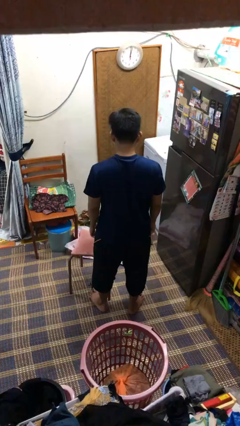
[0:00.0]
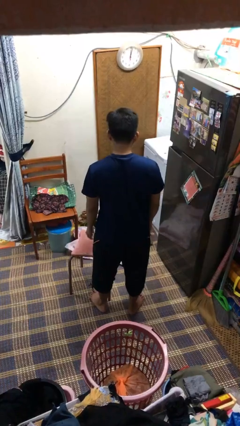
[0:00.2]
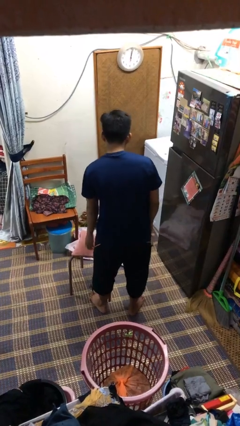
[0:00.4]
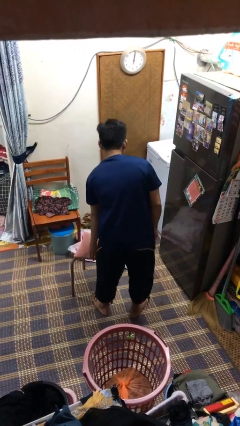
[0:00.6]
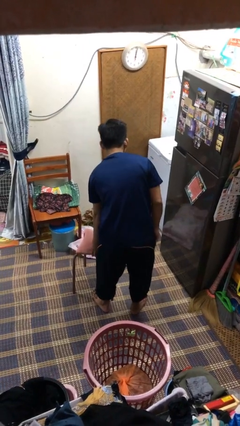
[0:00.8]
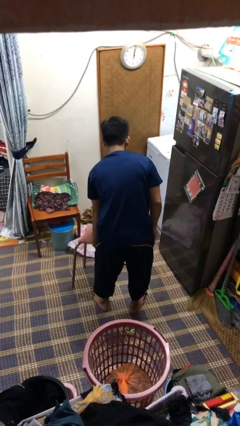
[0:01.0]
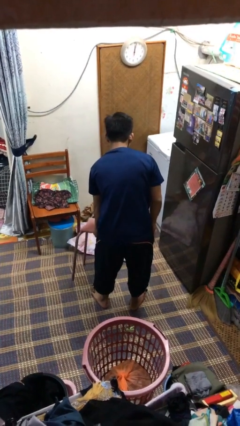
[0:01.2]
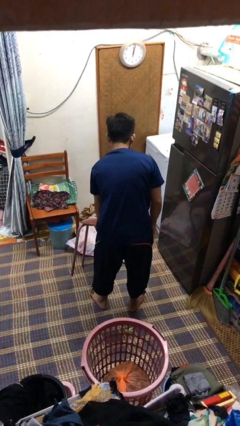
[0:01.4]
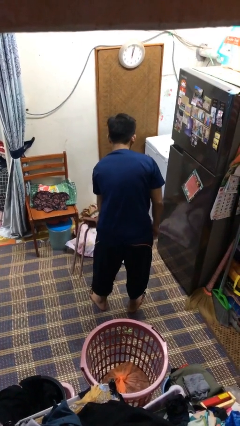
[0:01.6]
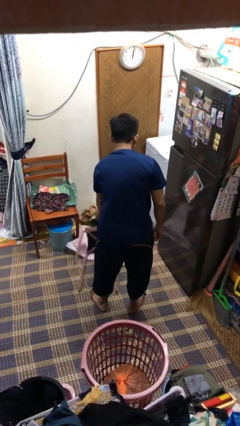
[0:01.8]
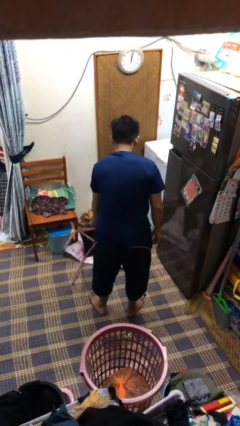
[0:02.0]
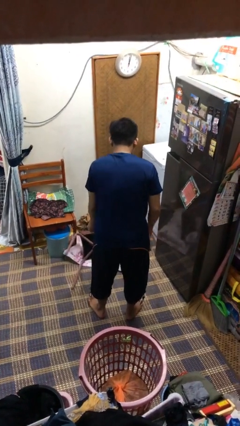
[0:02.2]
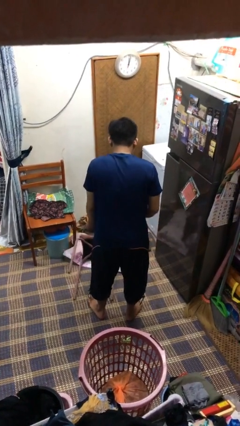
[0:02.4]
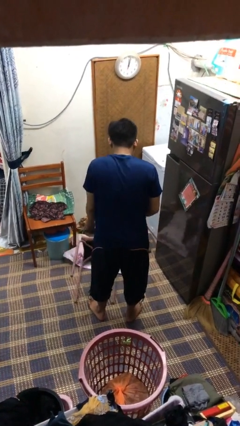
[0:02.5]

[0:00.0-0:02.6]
person knocks over furniture

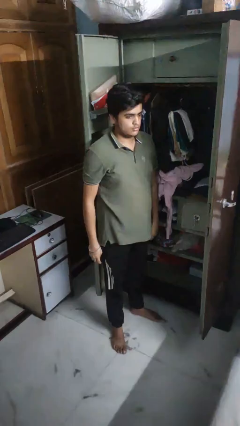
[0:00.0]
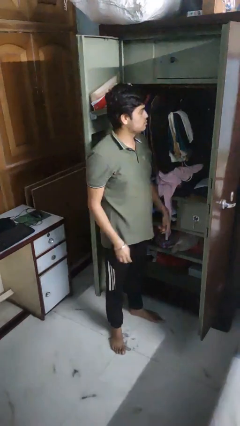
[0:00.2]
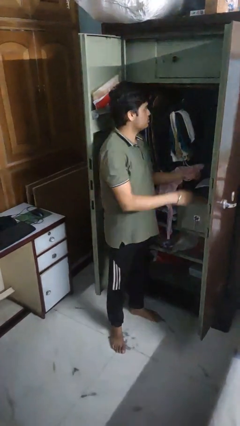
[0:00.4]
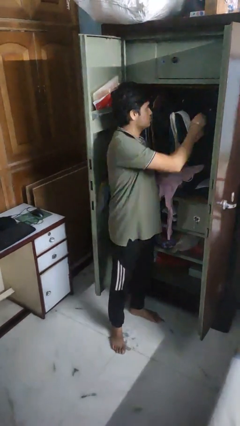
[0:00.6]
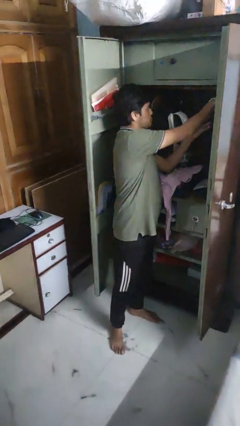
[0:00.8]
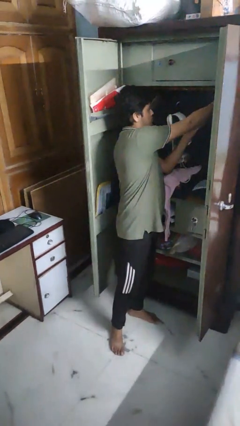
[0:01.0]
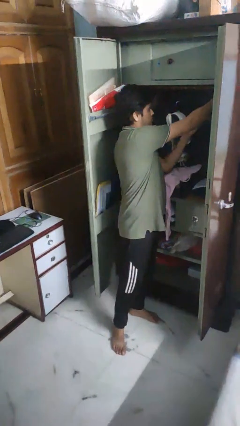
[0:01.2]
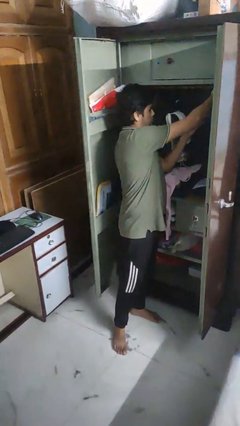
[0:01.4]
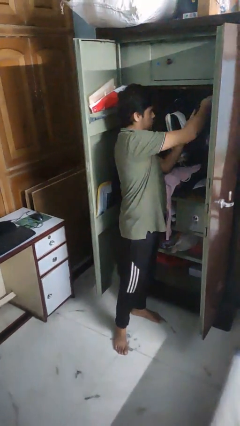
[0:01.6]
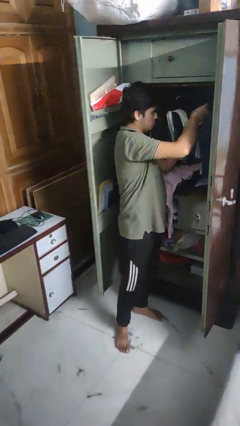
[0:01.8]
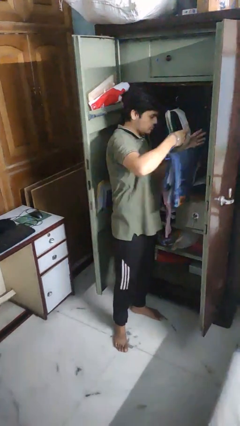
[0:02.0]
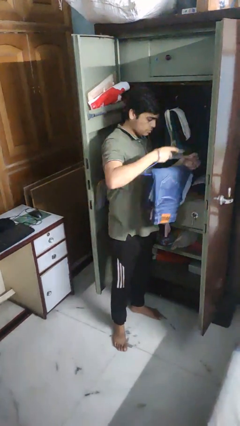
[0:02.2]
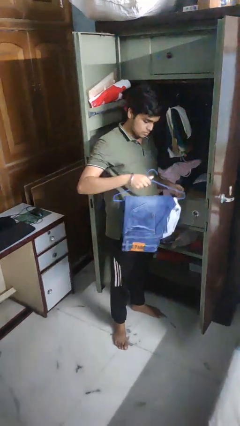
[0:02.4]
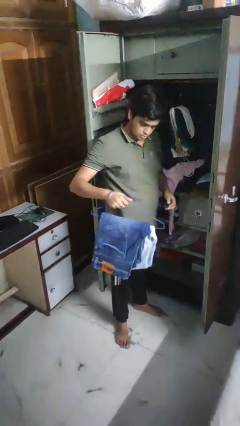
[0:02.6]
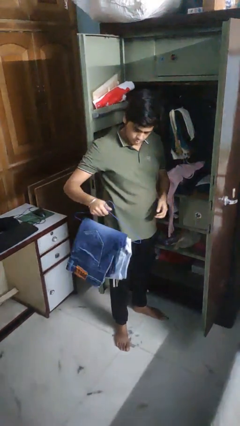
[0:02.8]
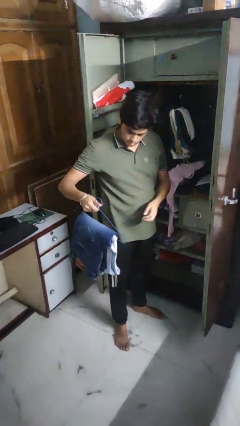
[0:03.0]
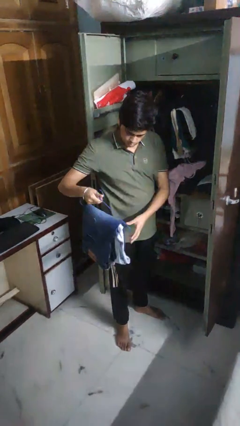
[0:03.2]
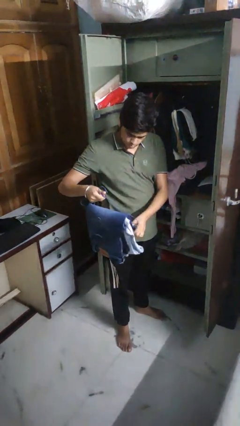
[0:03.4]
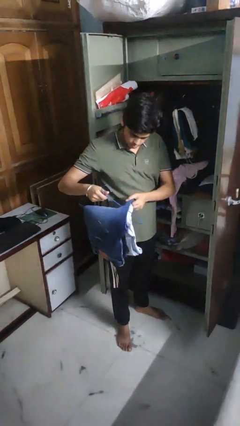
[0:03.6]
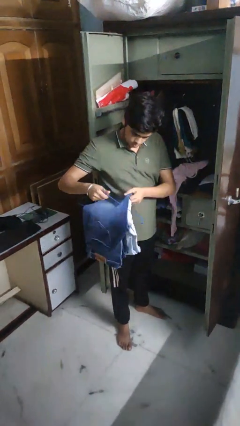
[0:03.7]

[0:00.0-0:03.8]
person takes clothes from closet

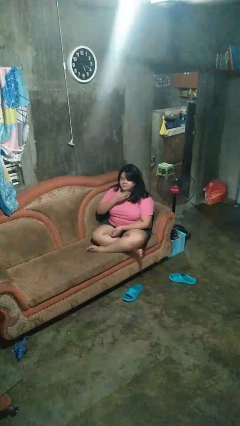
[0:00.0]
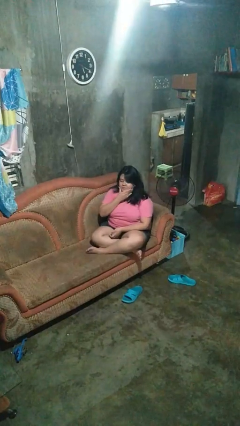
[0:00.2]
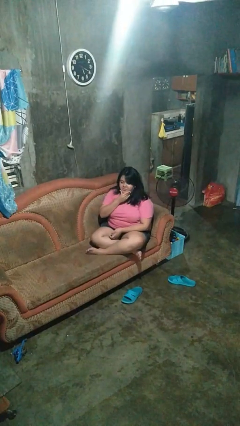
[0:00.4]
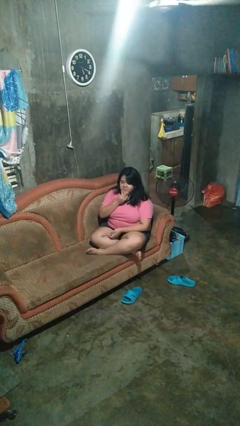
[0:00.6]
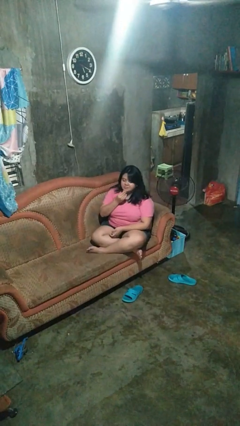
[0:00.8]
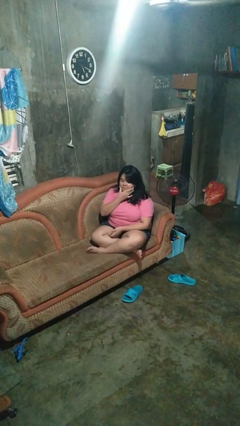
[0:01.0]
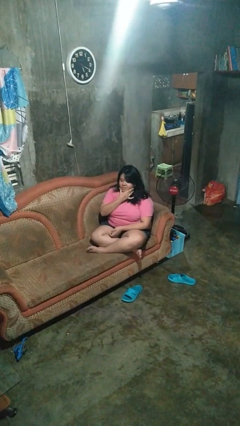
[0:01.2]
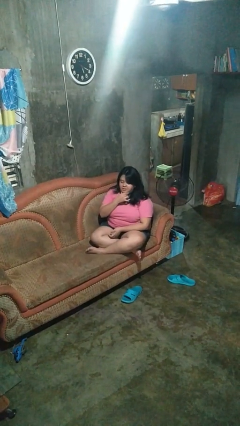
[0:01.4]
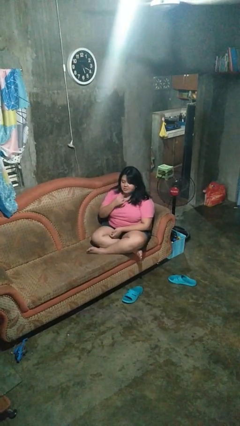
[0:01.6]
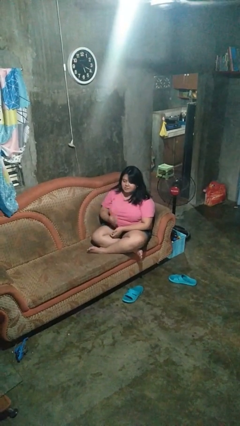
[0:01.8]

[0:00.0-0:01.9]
person strokes chin

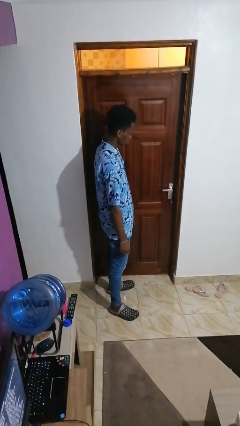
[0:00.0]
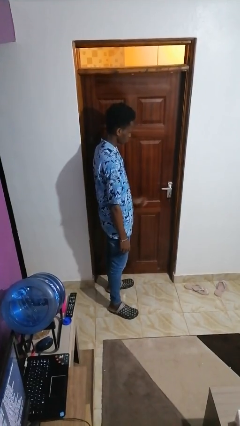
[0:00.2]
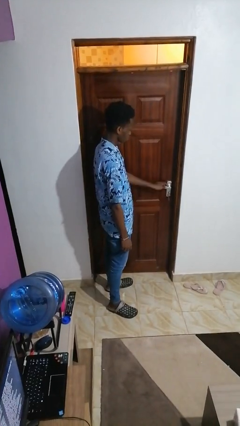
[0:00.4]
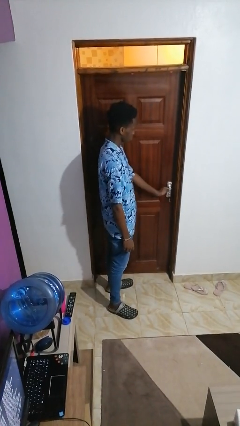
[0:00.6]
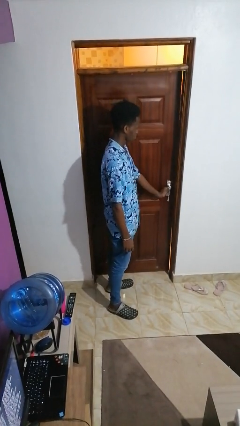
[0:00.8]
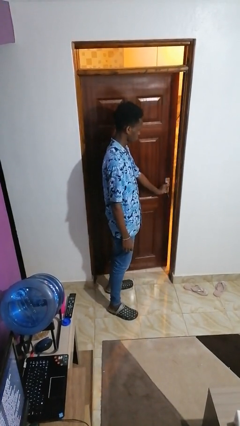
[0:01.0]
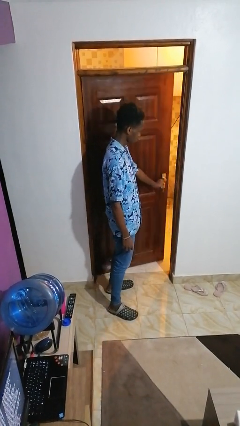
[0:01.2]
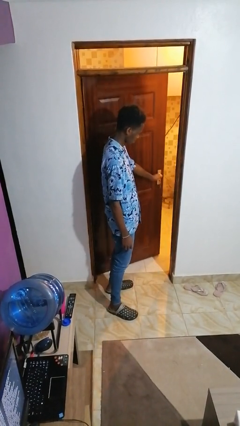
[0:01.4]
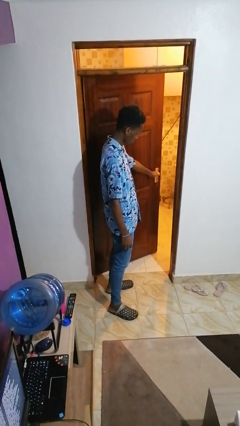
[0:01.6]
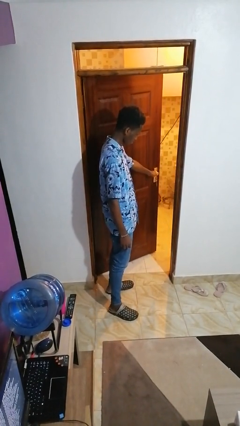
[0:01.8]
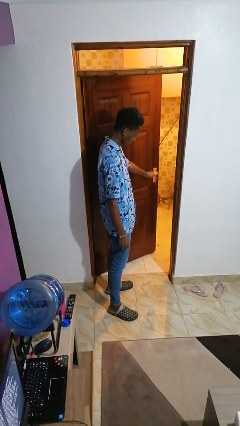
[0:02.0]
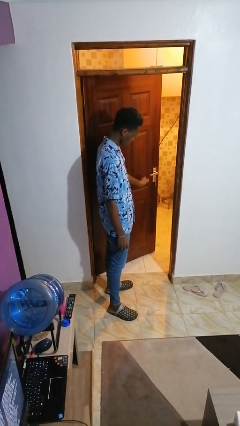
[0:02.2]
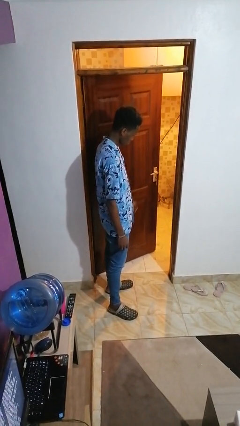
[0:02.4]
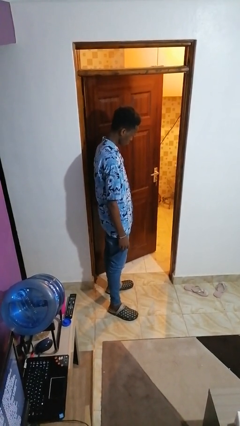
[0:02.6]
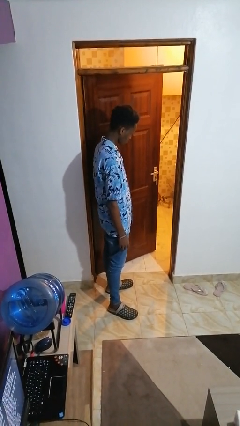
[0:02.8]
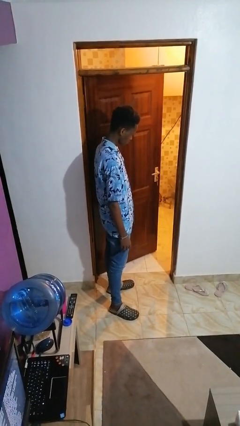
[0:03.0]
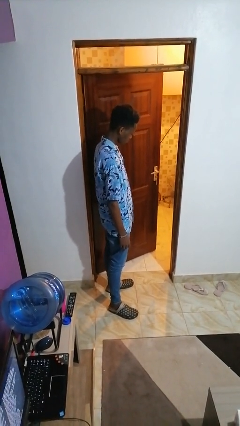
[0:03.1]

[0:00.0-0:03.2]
person opens facility door

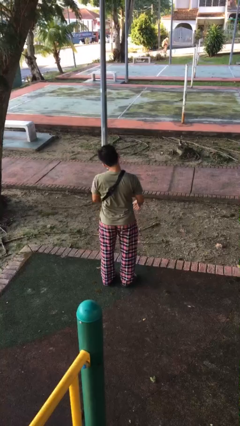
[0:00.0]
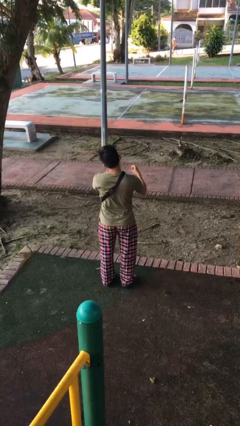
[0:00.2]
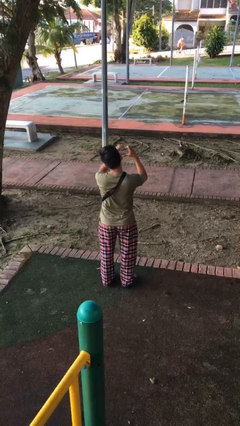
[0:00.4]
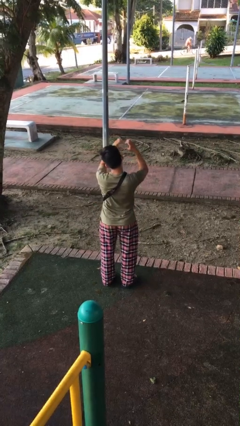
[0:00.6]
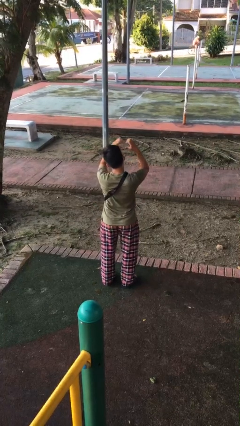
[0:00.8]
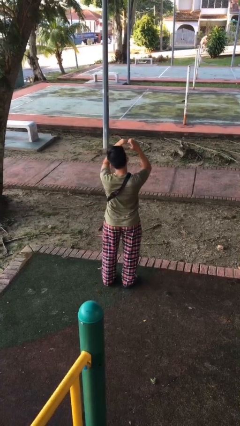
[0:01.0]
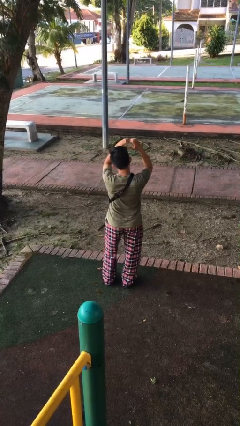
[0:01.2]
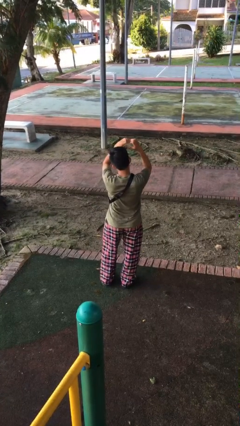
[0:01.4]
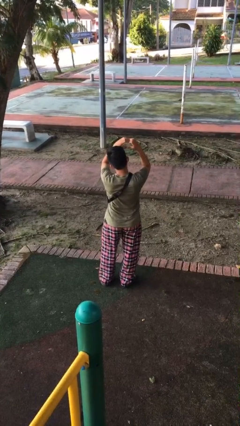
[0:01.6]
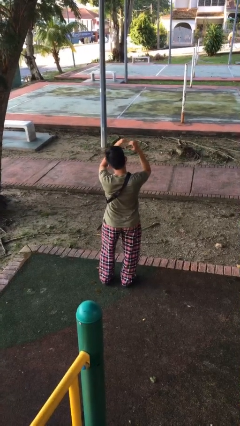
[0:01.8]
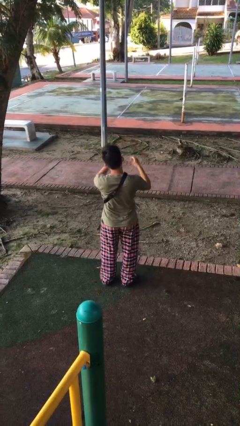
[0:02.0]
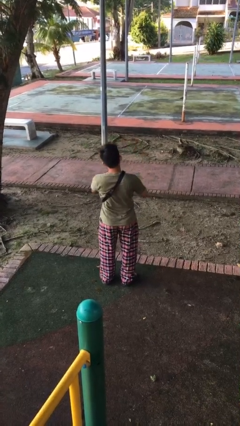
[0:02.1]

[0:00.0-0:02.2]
person gestures heart

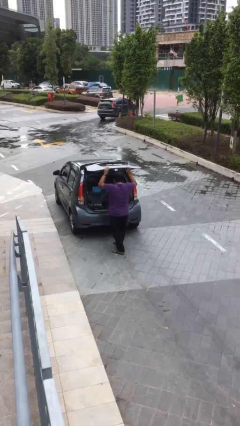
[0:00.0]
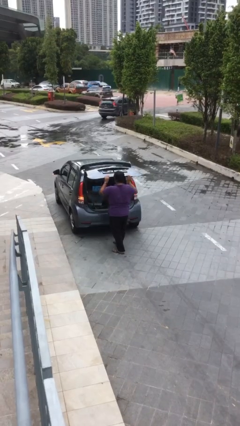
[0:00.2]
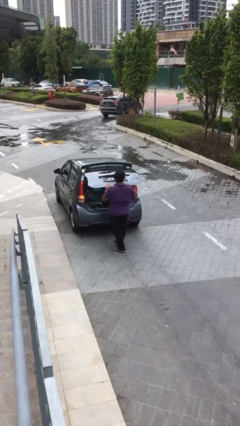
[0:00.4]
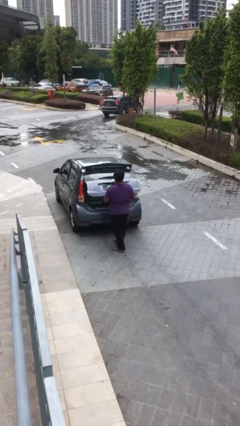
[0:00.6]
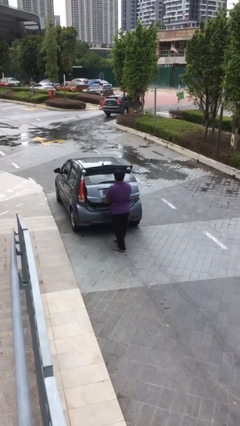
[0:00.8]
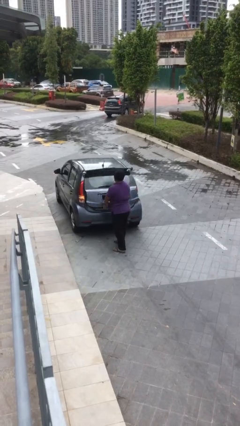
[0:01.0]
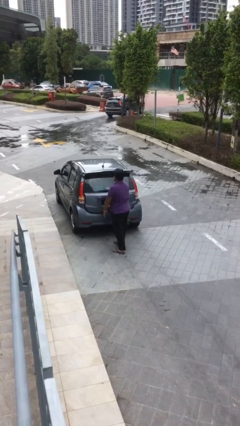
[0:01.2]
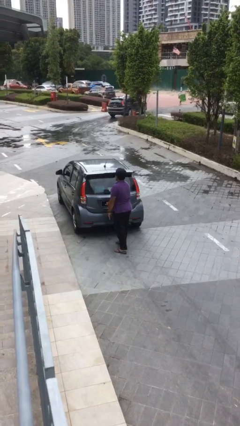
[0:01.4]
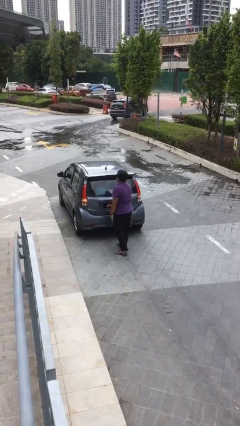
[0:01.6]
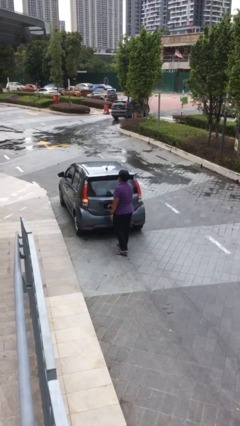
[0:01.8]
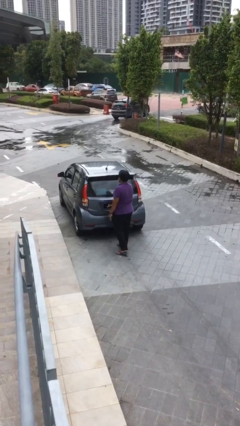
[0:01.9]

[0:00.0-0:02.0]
person closes car trunk

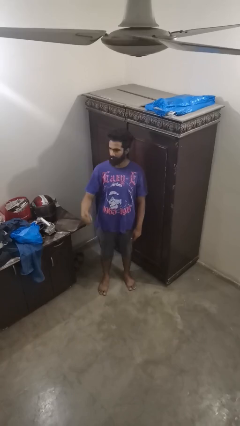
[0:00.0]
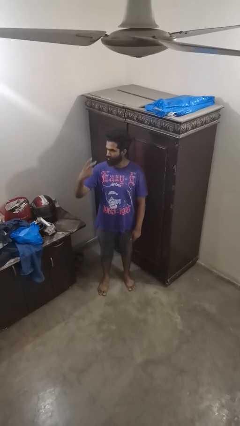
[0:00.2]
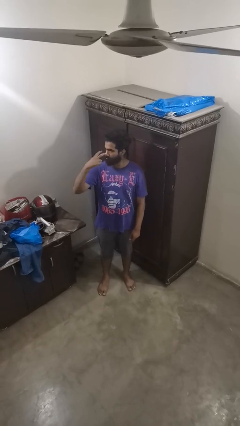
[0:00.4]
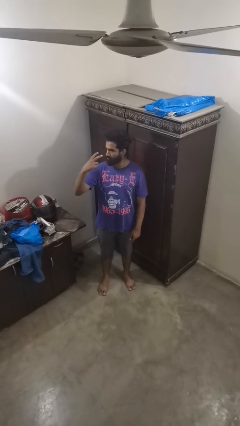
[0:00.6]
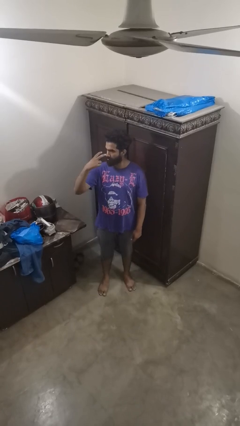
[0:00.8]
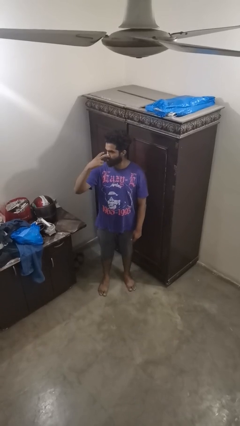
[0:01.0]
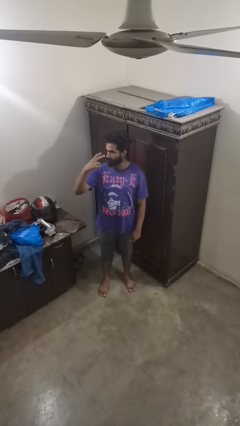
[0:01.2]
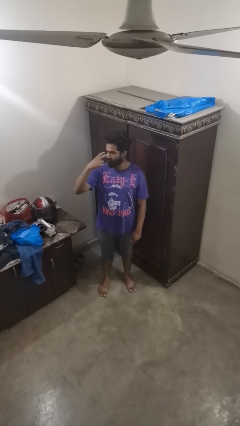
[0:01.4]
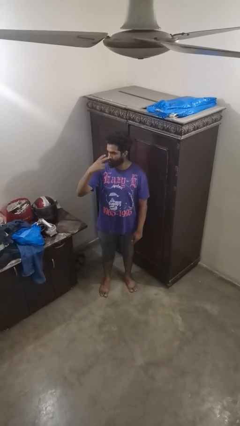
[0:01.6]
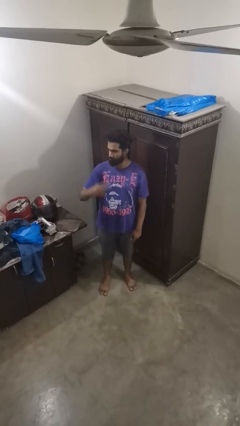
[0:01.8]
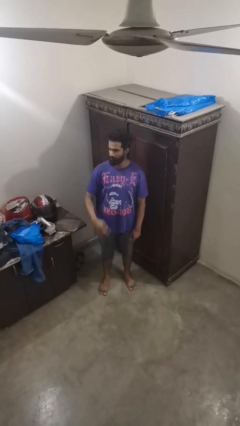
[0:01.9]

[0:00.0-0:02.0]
person gestures watch closely
